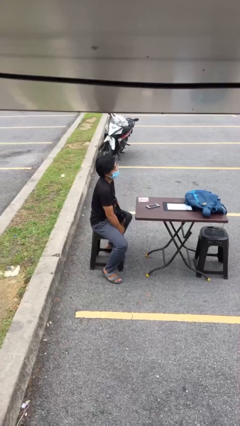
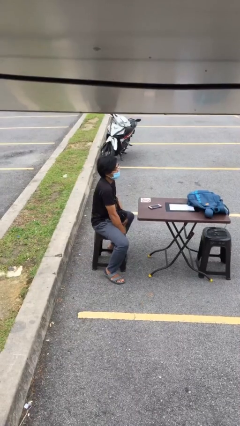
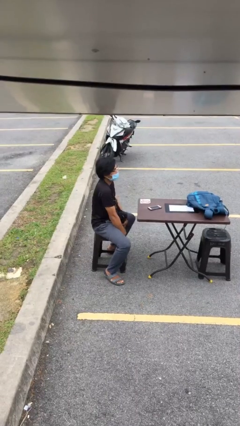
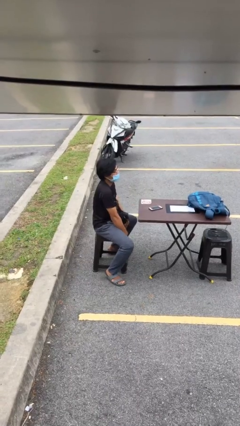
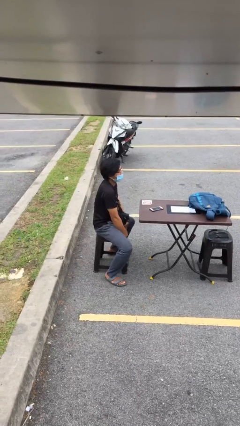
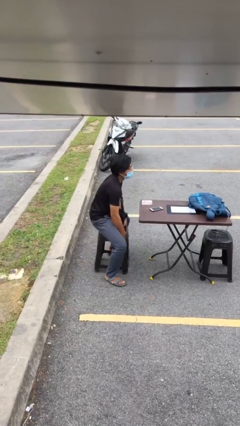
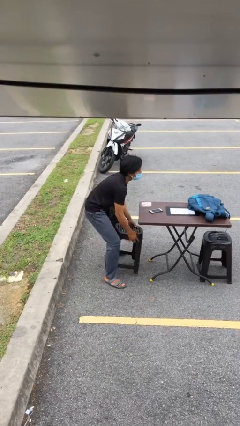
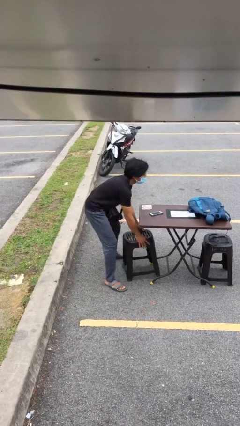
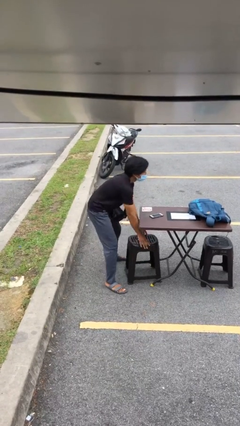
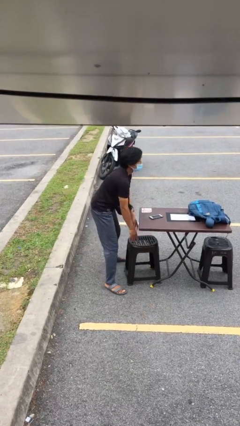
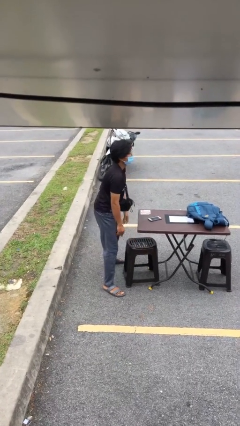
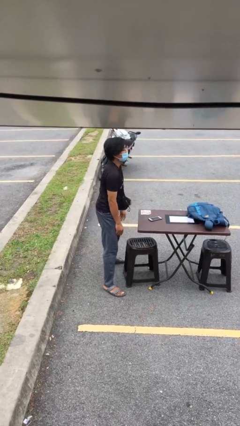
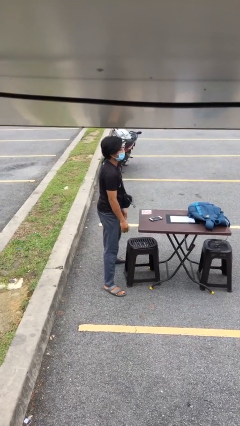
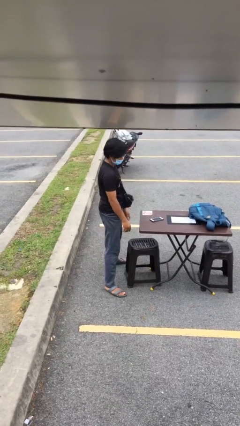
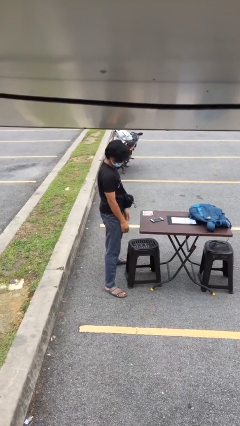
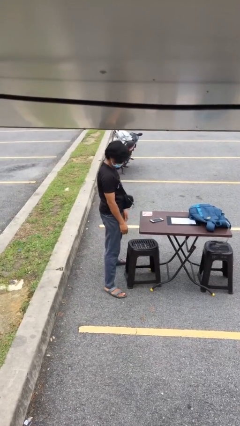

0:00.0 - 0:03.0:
person stands up

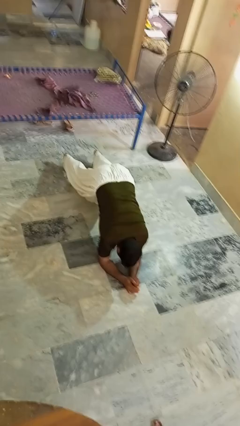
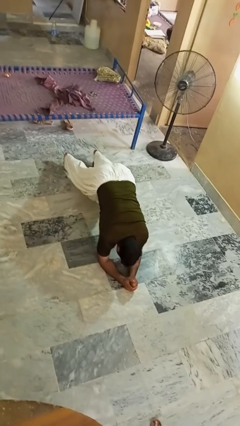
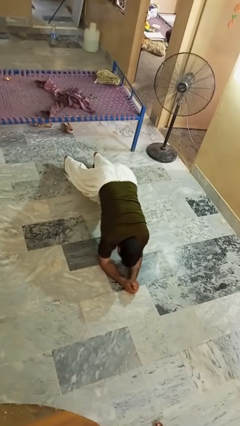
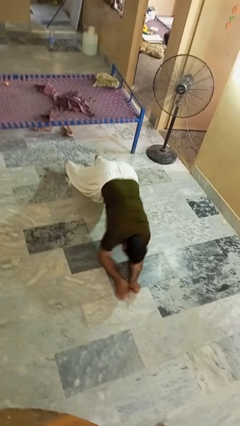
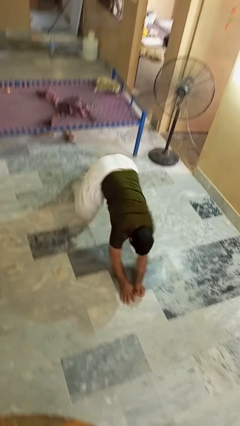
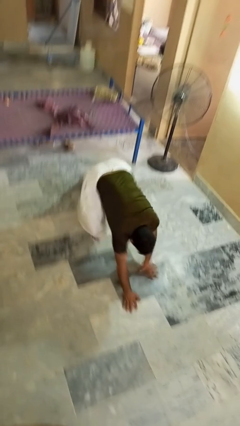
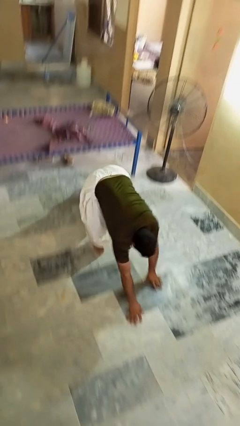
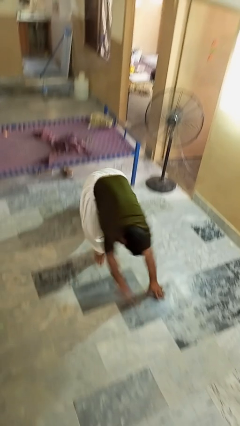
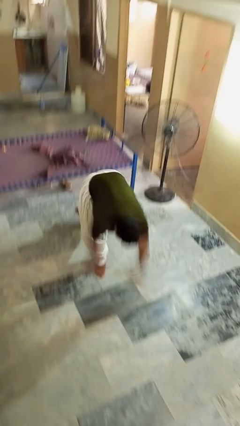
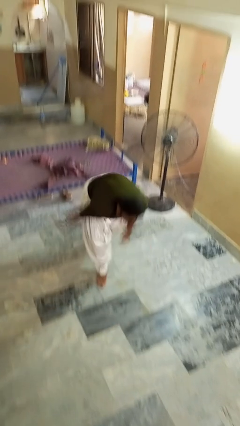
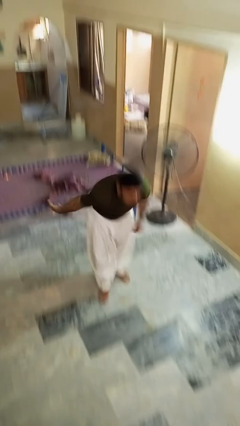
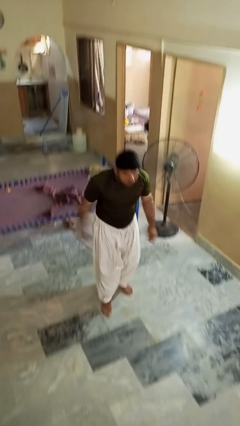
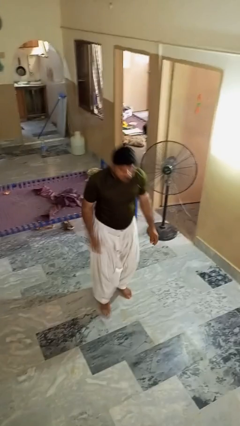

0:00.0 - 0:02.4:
person stands up from floor

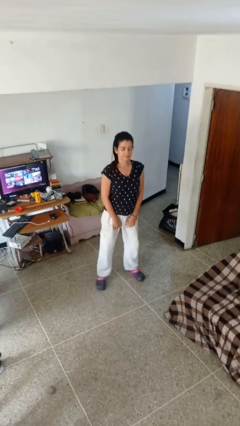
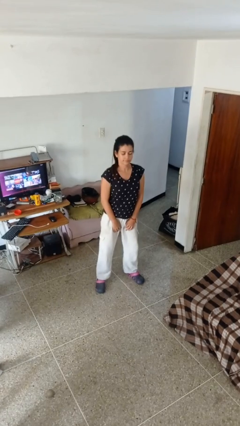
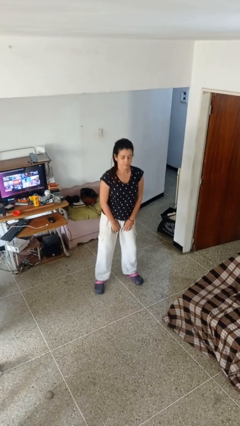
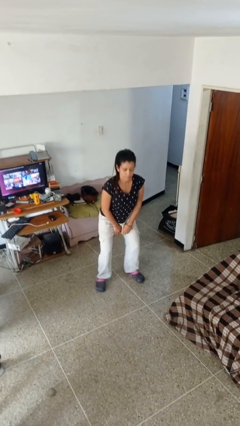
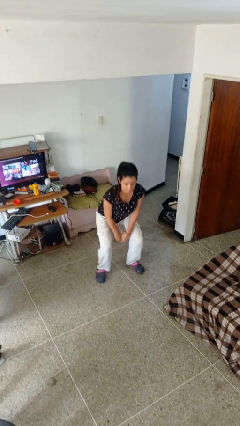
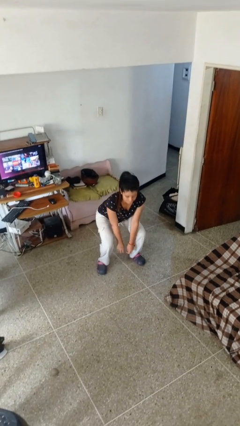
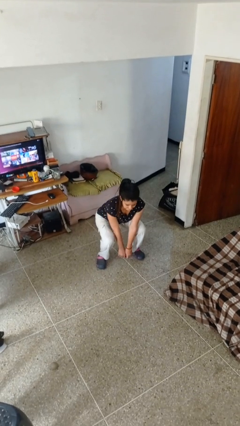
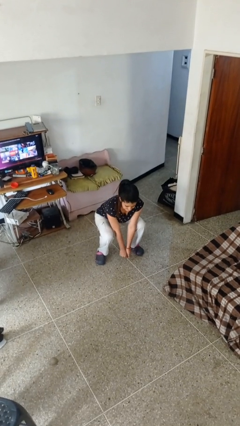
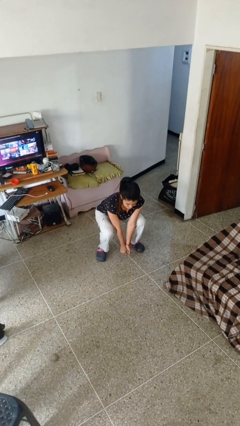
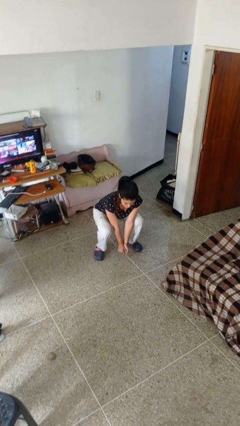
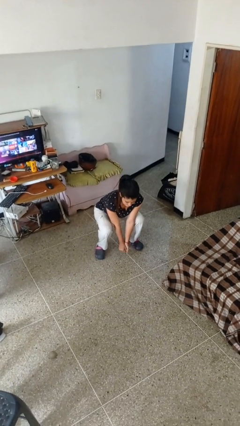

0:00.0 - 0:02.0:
person squats

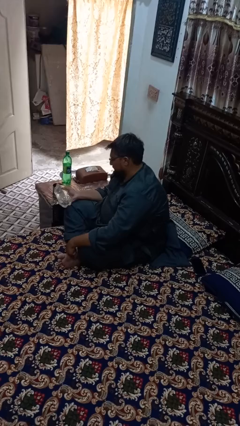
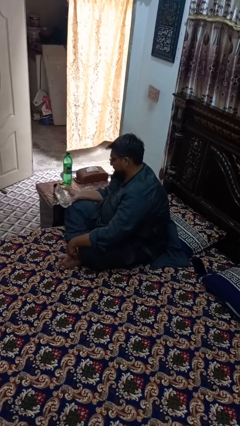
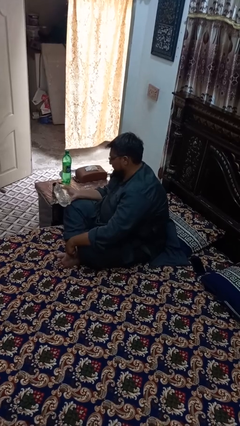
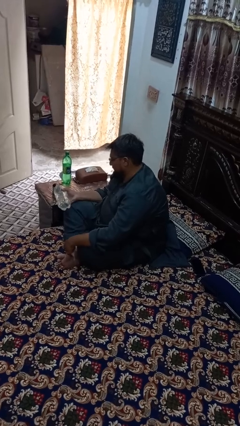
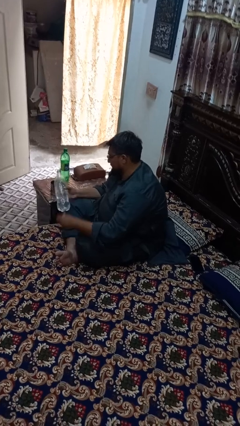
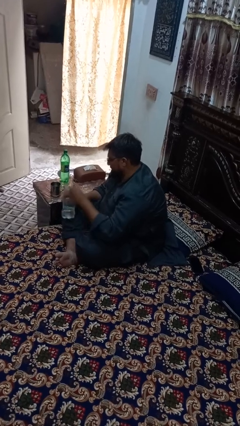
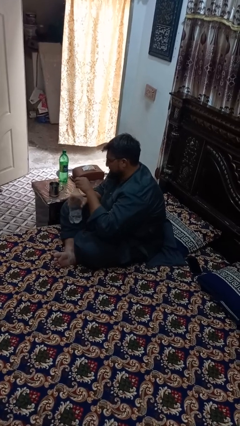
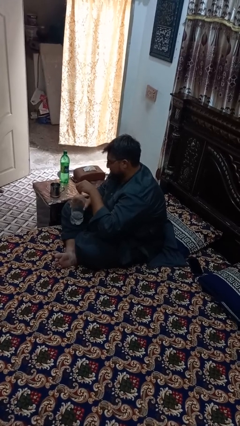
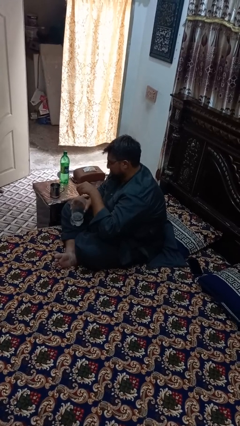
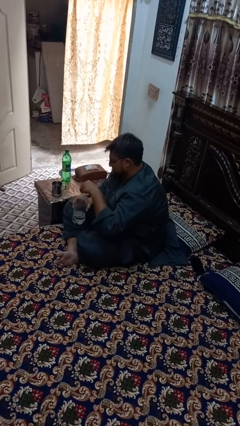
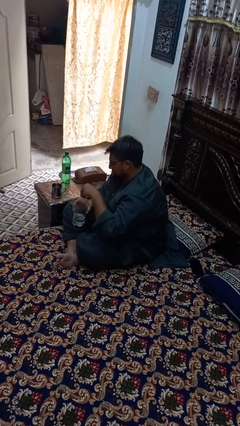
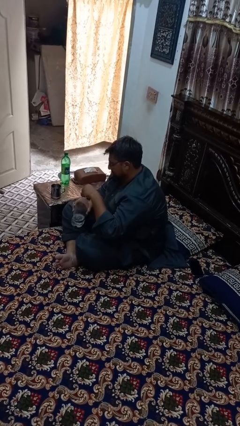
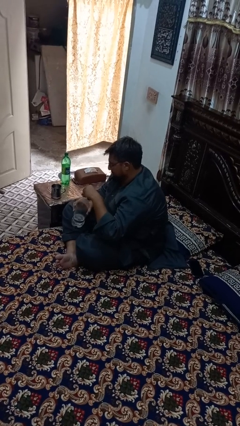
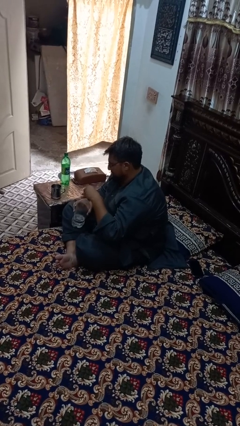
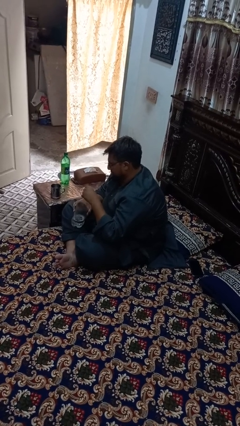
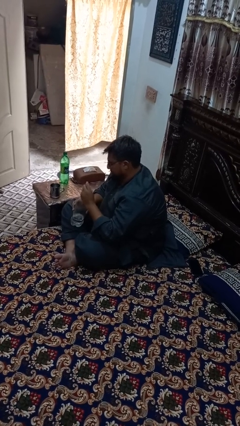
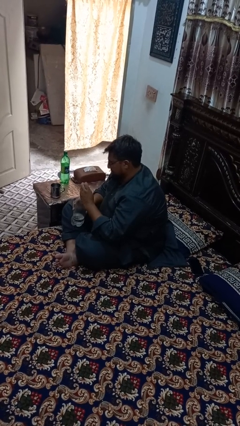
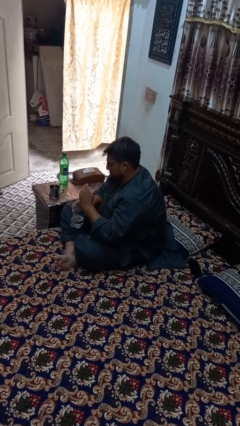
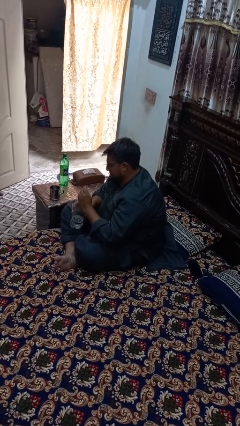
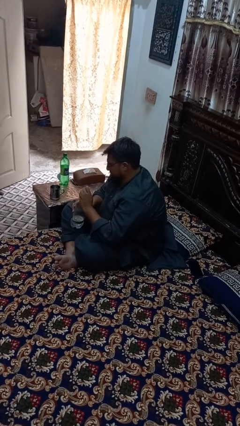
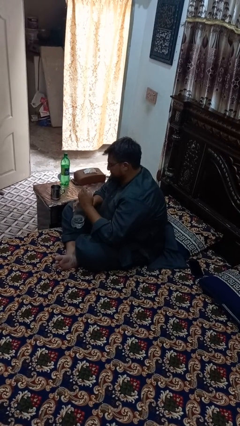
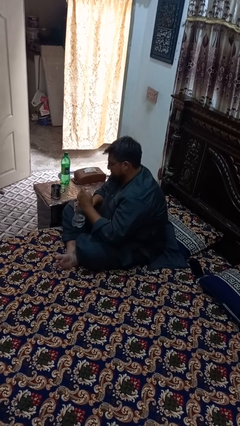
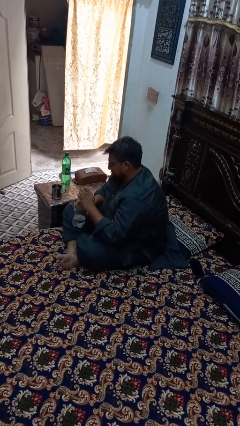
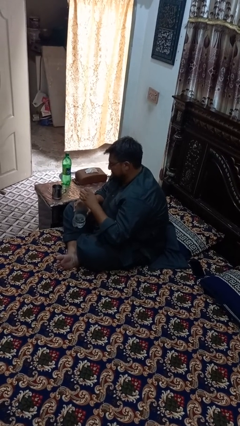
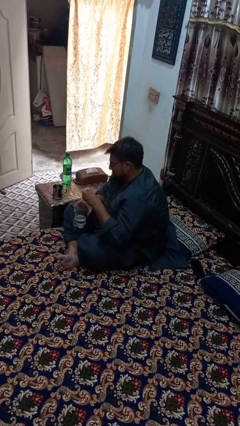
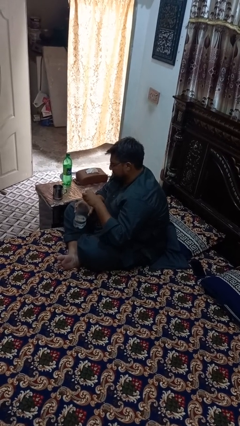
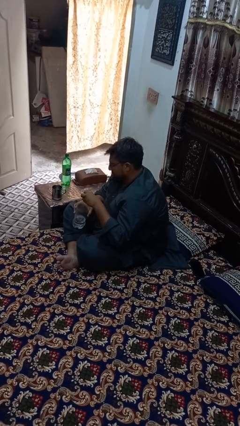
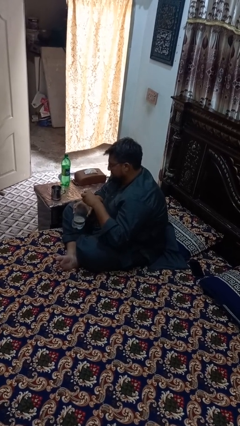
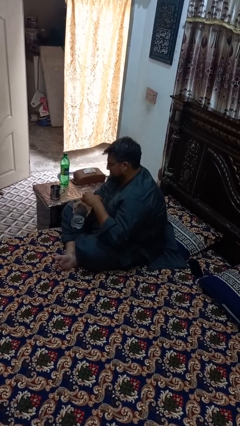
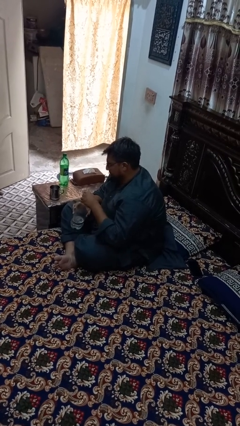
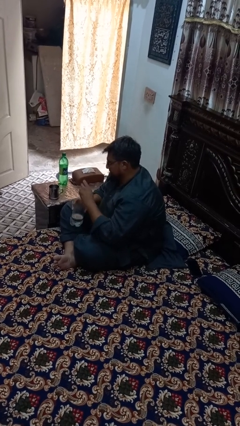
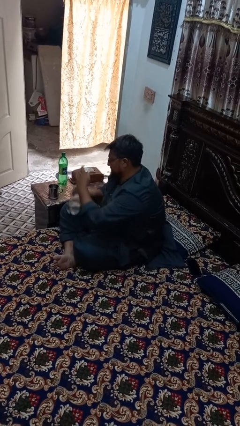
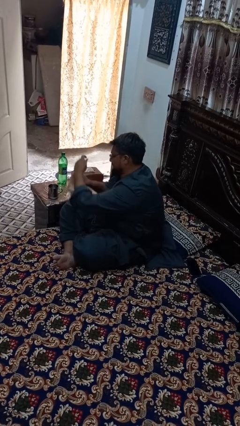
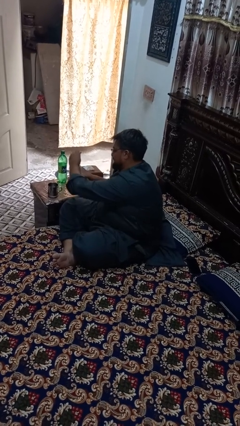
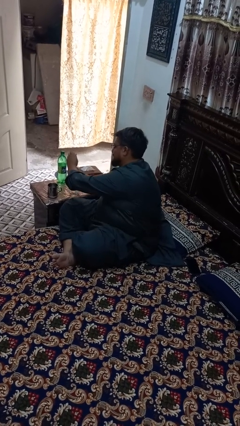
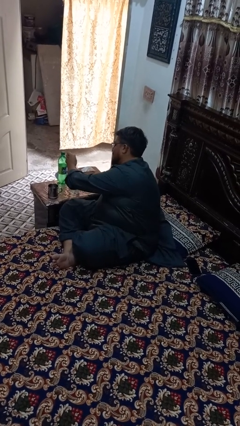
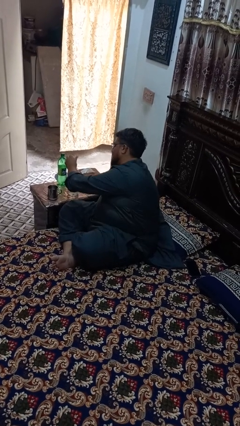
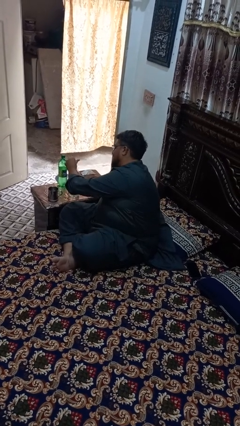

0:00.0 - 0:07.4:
person screws lid to bottle

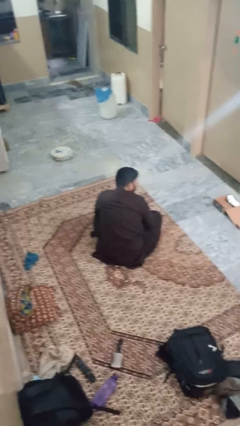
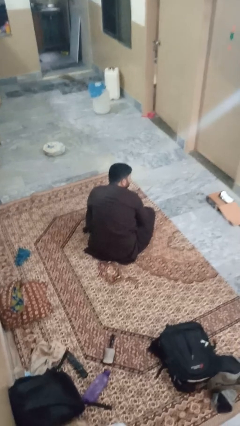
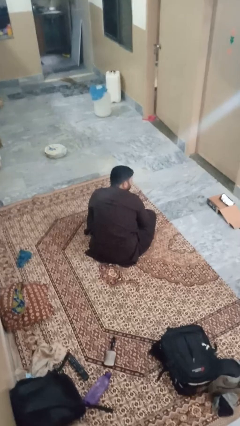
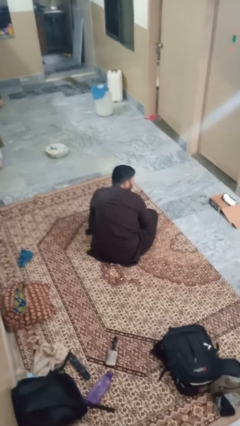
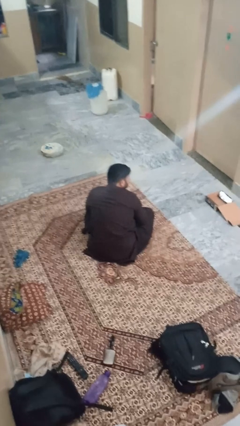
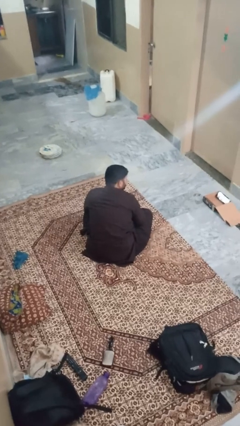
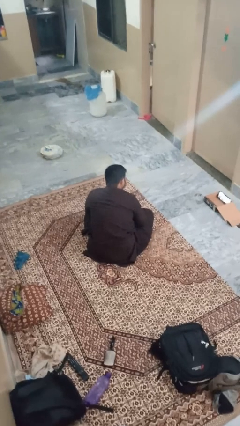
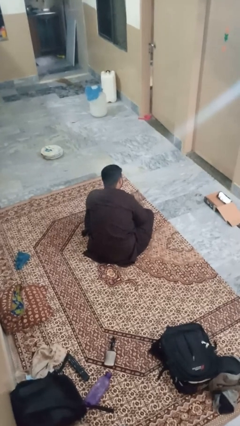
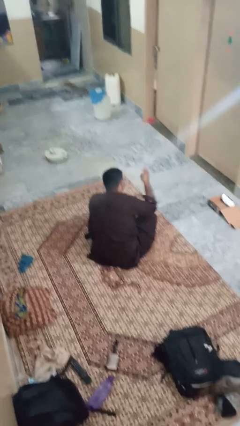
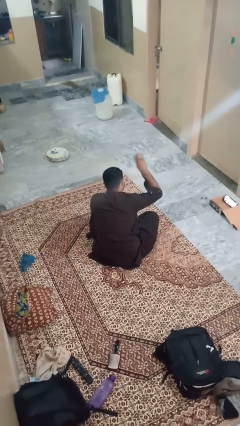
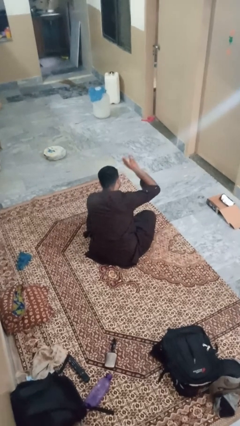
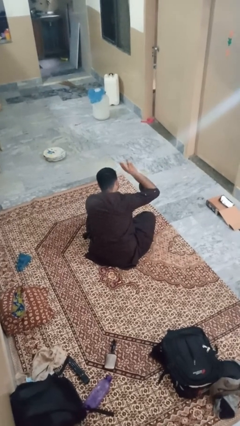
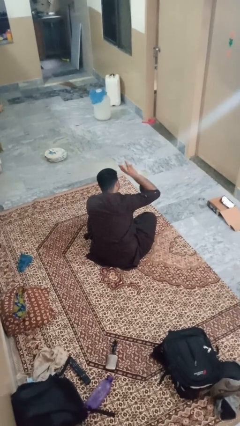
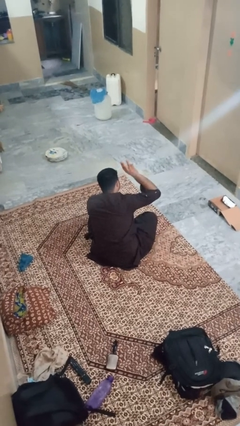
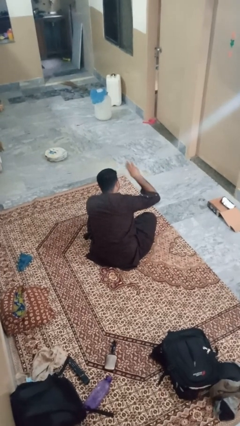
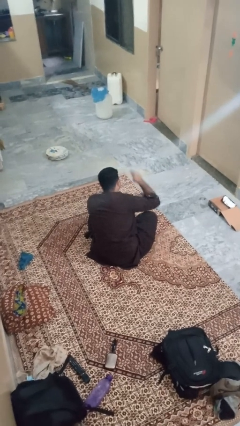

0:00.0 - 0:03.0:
person gestures number three
